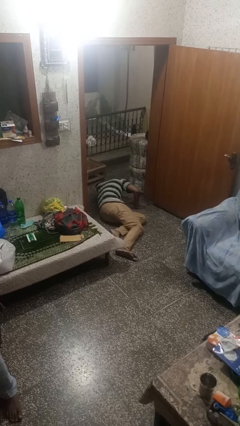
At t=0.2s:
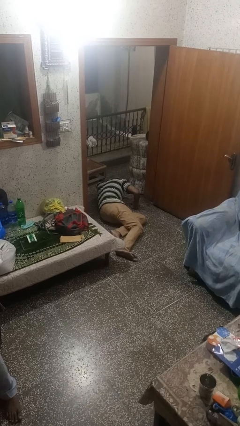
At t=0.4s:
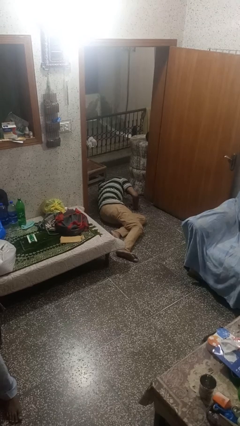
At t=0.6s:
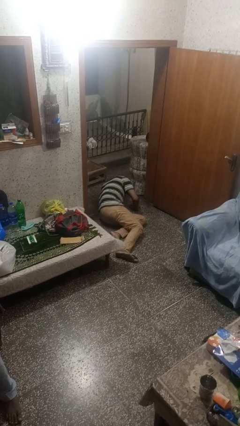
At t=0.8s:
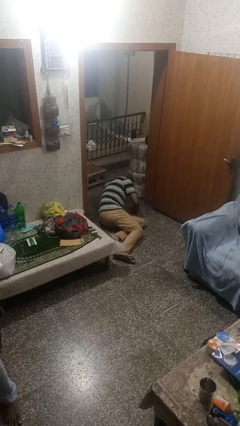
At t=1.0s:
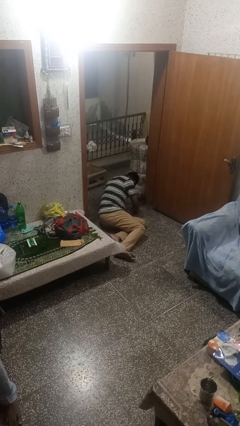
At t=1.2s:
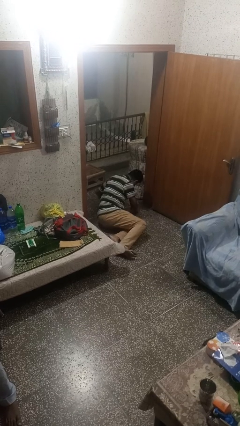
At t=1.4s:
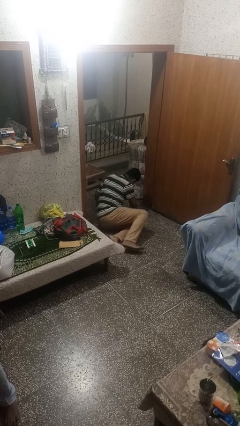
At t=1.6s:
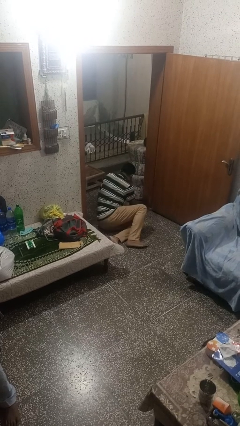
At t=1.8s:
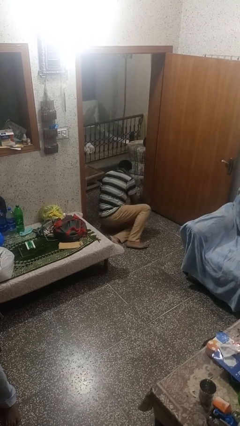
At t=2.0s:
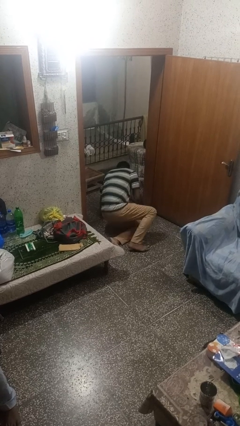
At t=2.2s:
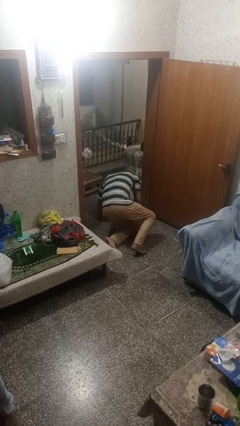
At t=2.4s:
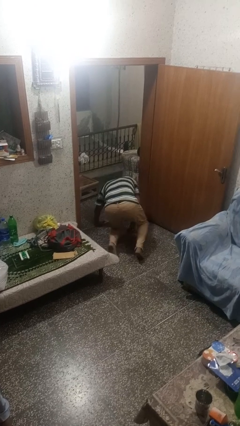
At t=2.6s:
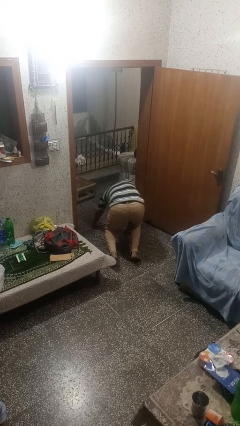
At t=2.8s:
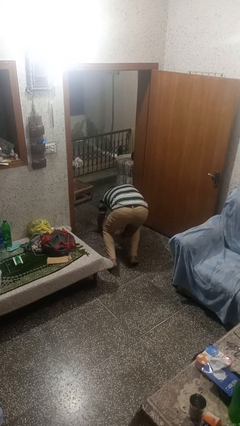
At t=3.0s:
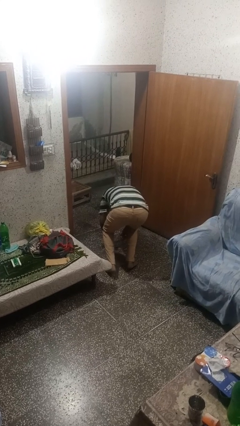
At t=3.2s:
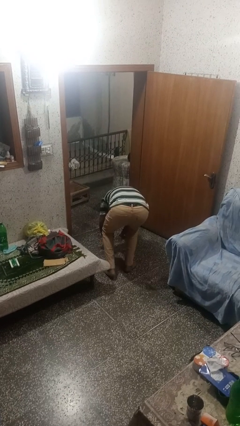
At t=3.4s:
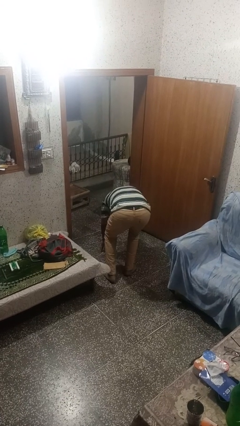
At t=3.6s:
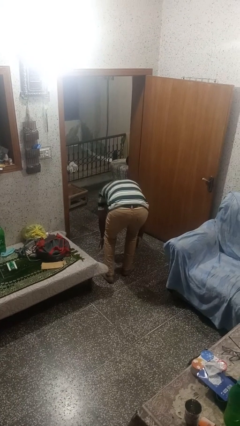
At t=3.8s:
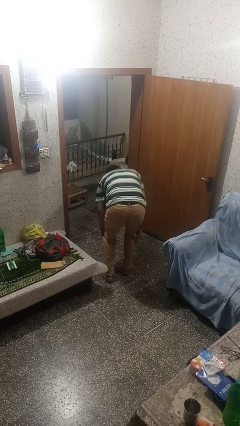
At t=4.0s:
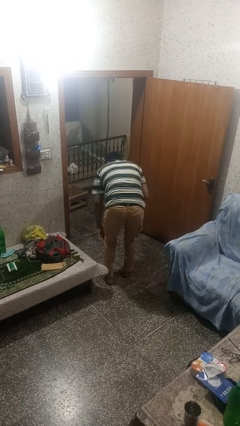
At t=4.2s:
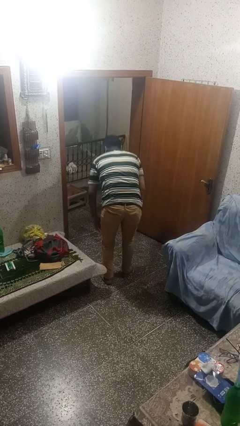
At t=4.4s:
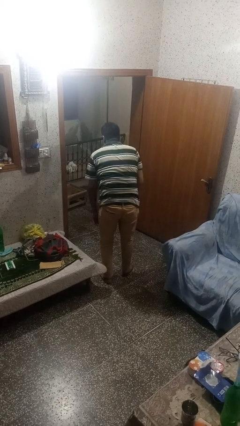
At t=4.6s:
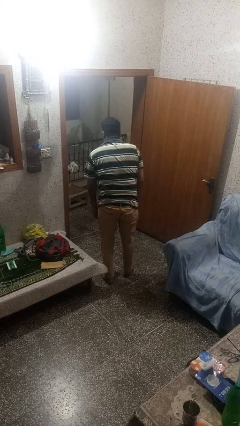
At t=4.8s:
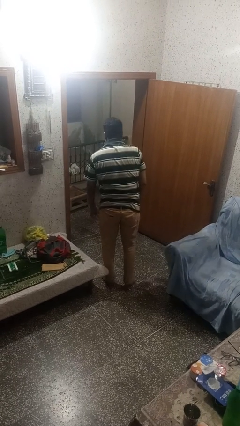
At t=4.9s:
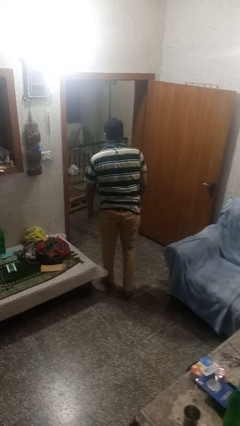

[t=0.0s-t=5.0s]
person stands up from floor

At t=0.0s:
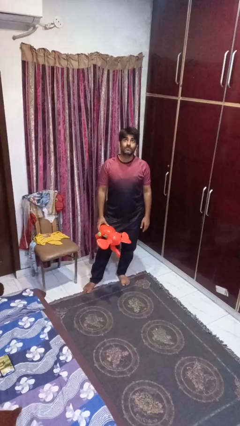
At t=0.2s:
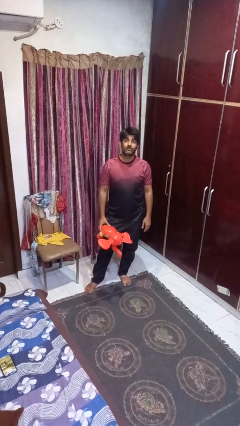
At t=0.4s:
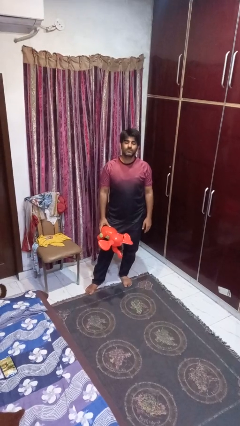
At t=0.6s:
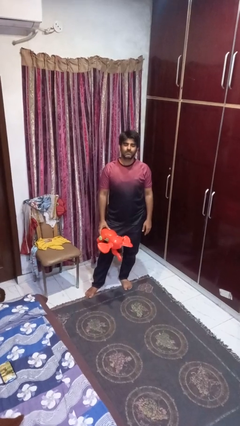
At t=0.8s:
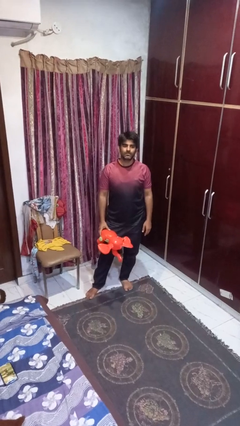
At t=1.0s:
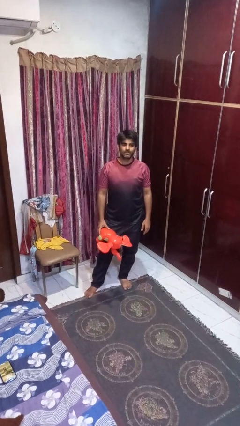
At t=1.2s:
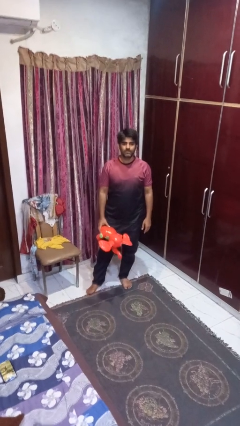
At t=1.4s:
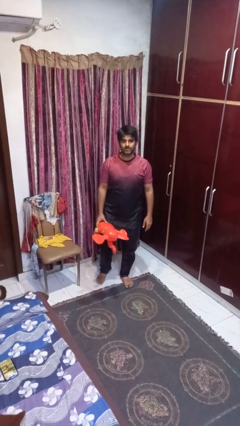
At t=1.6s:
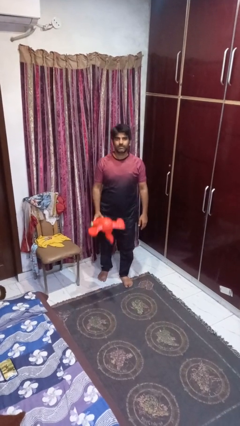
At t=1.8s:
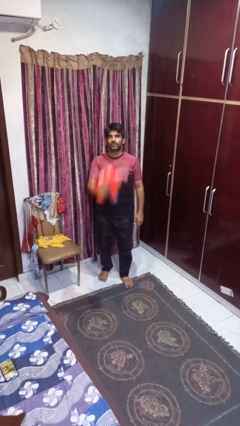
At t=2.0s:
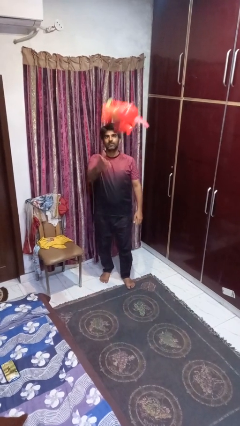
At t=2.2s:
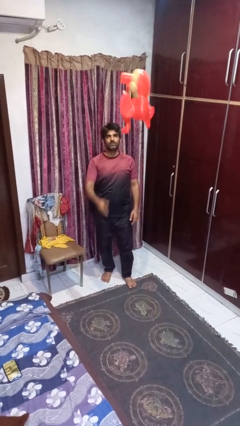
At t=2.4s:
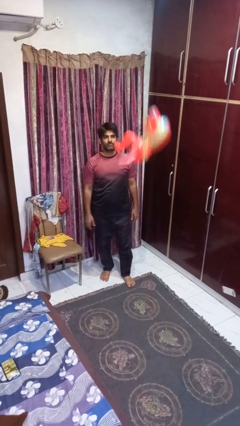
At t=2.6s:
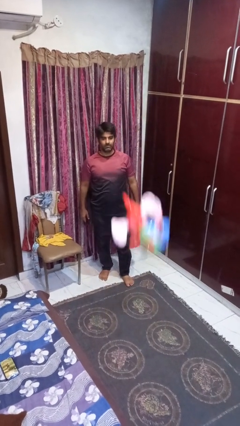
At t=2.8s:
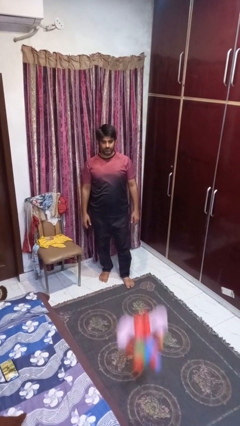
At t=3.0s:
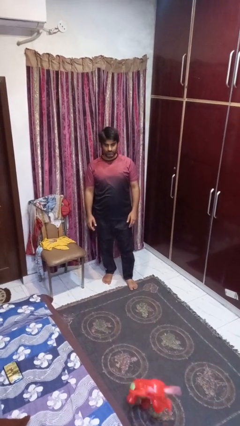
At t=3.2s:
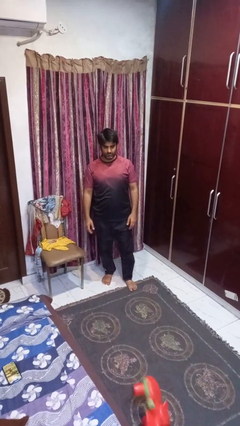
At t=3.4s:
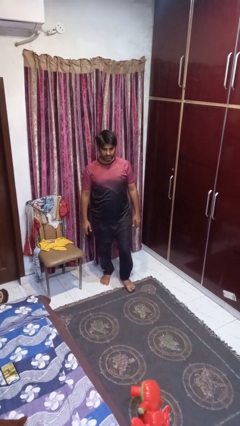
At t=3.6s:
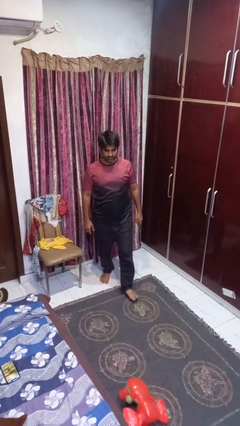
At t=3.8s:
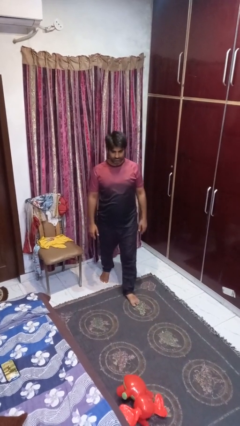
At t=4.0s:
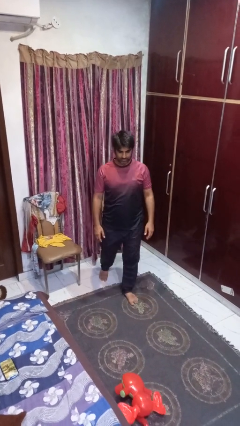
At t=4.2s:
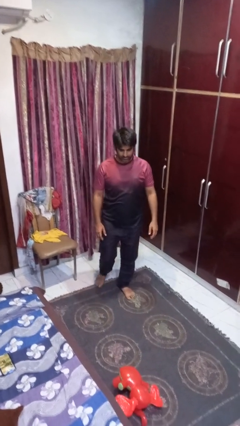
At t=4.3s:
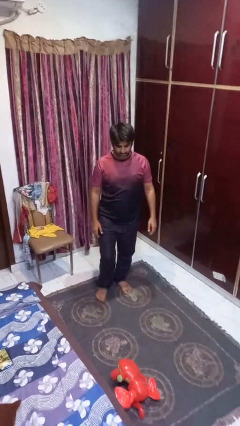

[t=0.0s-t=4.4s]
person throws object into air

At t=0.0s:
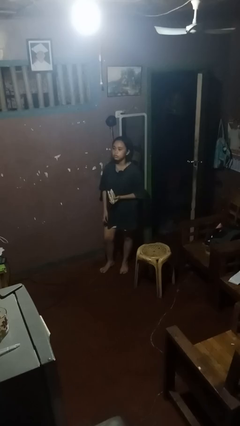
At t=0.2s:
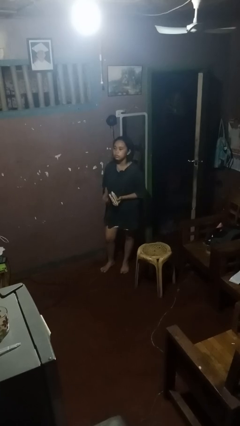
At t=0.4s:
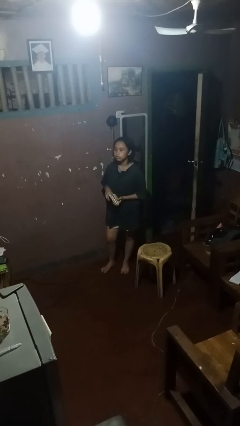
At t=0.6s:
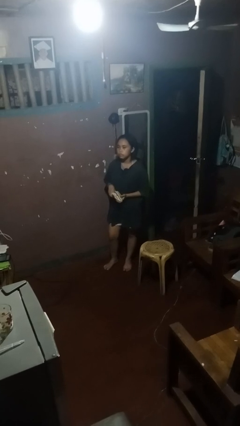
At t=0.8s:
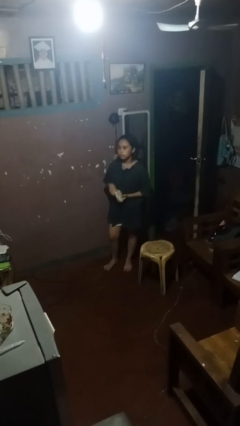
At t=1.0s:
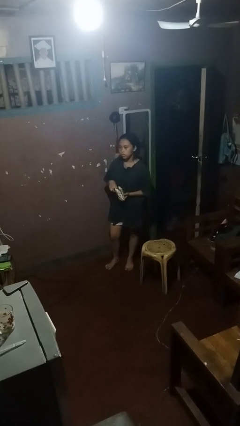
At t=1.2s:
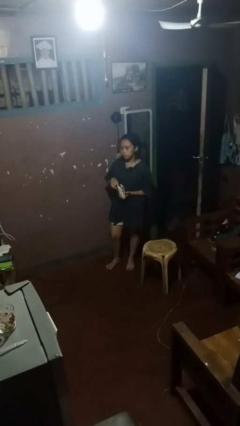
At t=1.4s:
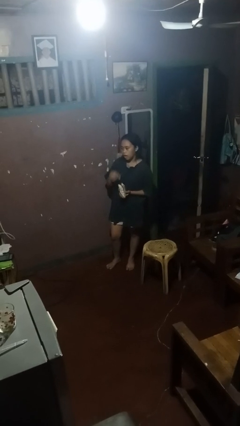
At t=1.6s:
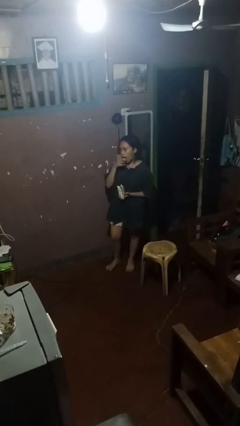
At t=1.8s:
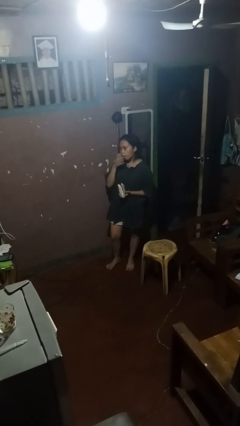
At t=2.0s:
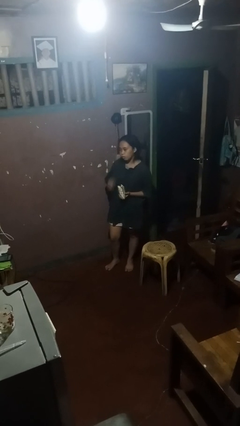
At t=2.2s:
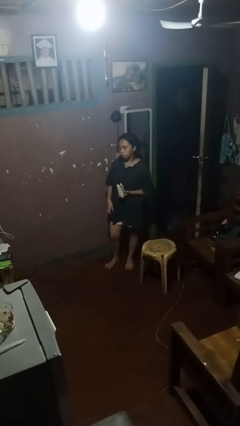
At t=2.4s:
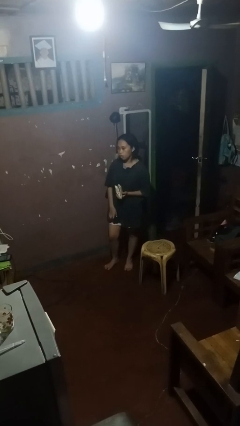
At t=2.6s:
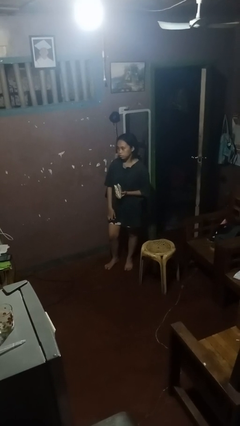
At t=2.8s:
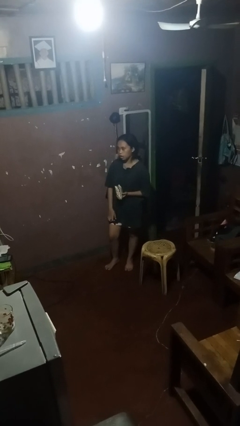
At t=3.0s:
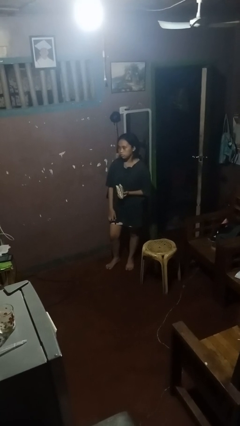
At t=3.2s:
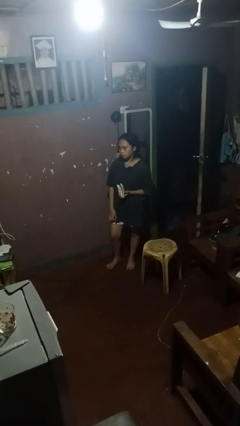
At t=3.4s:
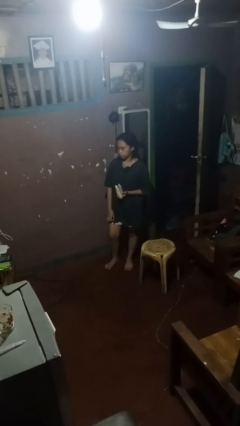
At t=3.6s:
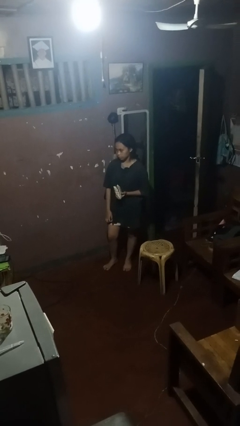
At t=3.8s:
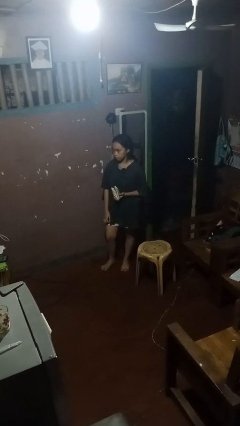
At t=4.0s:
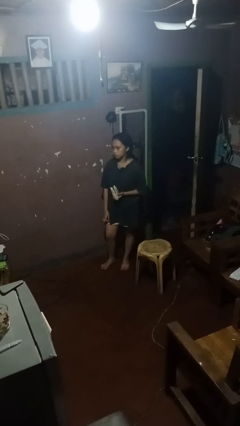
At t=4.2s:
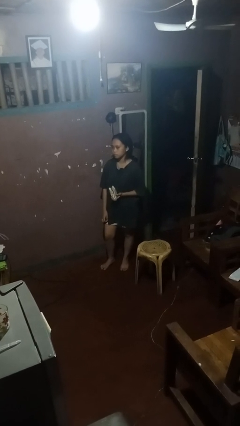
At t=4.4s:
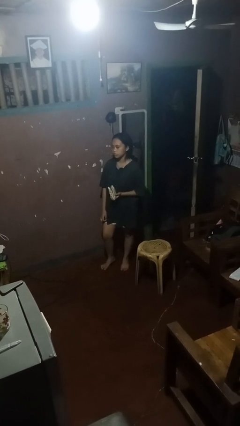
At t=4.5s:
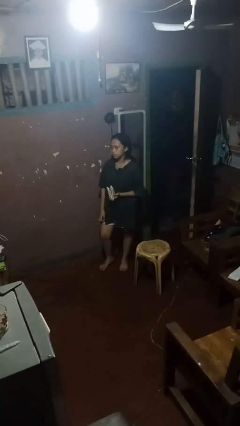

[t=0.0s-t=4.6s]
person eats snack from bag

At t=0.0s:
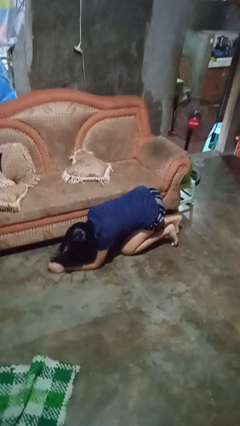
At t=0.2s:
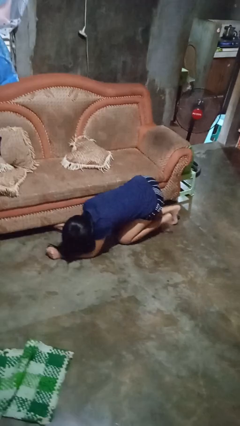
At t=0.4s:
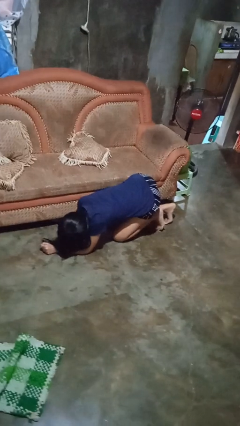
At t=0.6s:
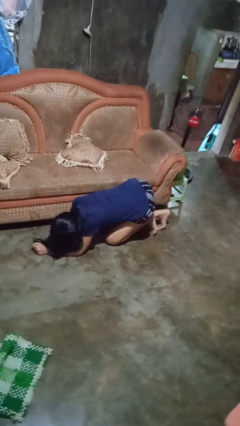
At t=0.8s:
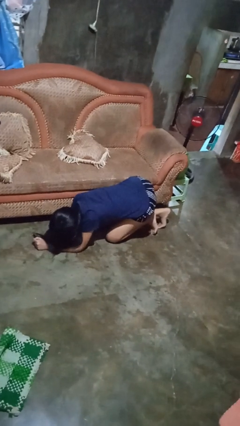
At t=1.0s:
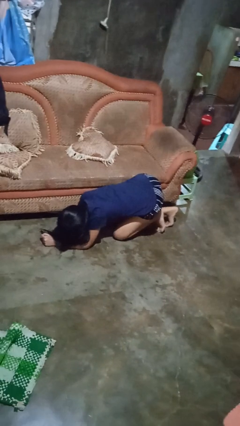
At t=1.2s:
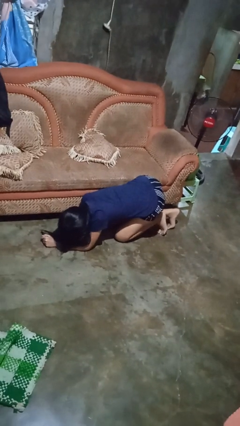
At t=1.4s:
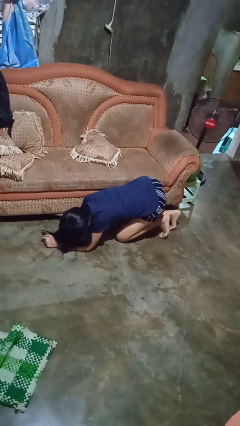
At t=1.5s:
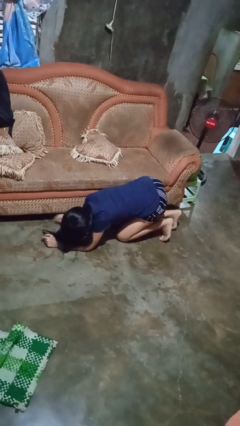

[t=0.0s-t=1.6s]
person searches under couch

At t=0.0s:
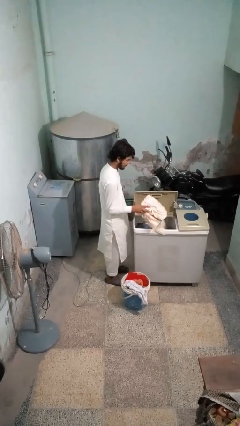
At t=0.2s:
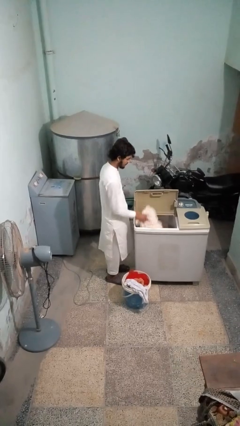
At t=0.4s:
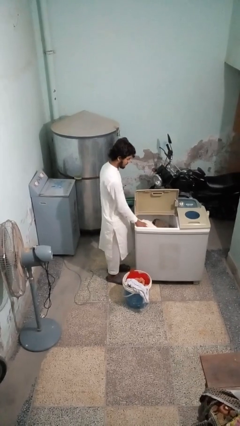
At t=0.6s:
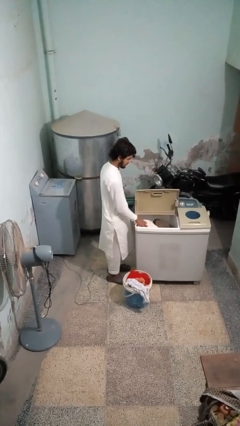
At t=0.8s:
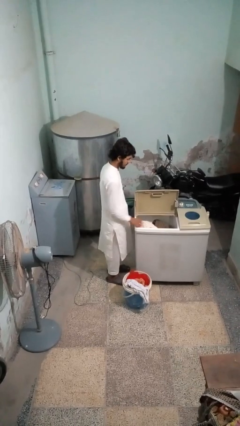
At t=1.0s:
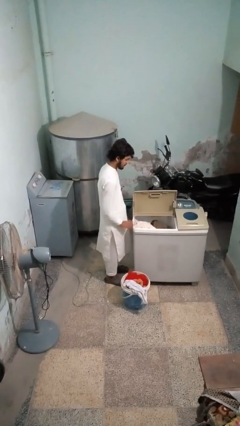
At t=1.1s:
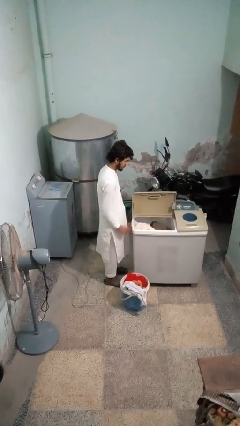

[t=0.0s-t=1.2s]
person loads clotheswasher

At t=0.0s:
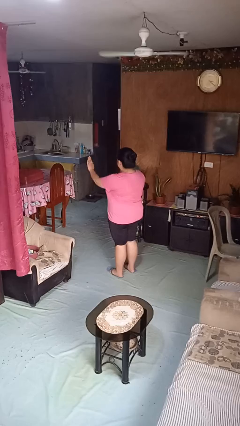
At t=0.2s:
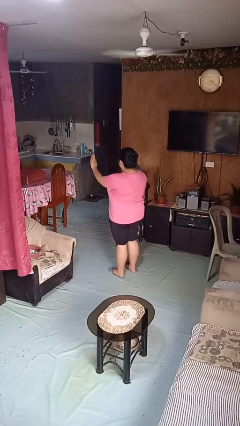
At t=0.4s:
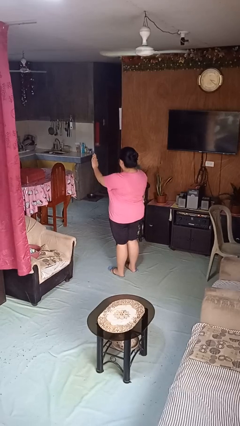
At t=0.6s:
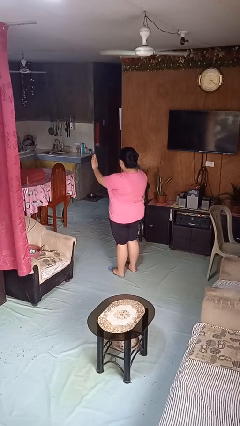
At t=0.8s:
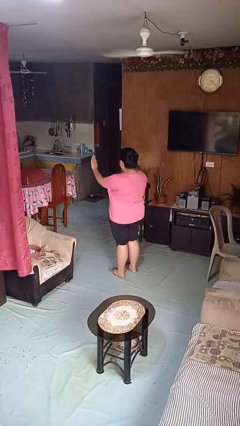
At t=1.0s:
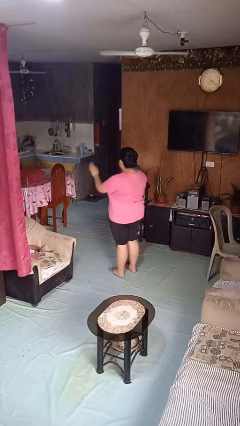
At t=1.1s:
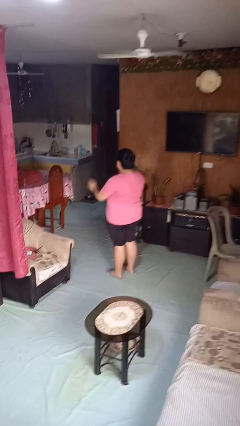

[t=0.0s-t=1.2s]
person gestures stop
